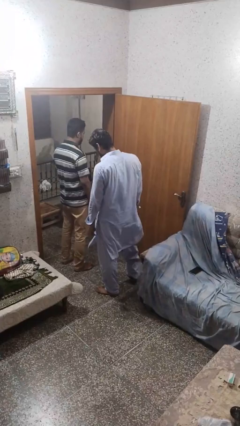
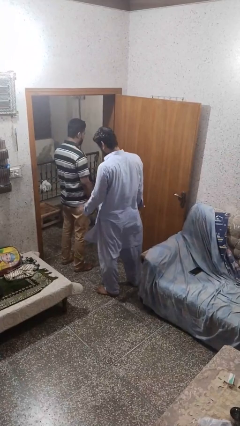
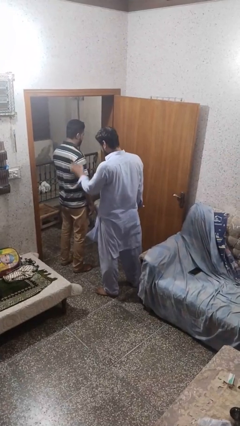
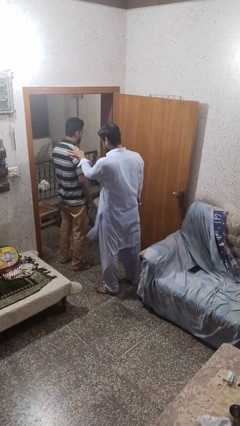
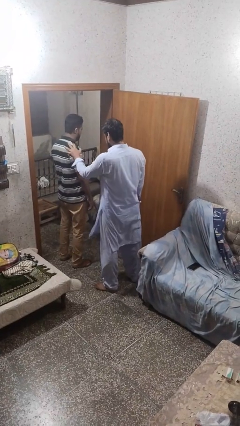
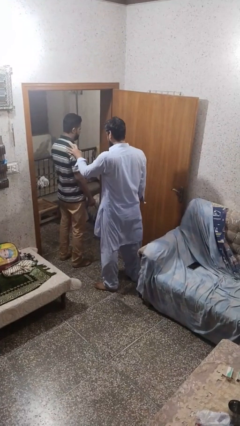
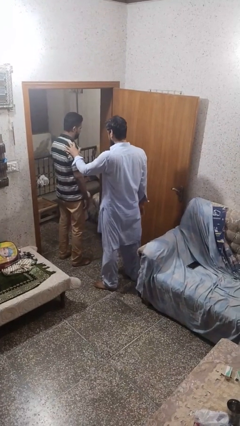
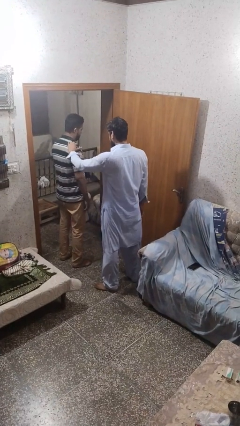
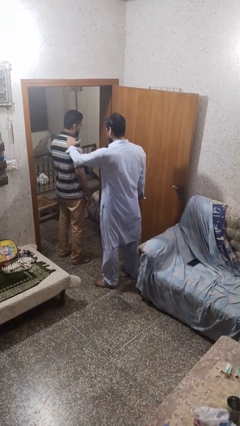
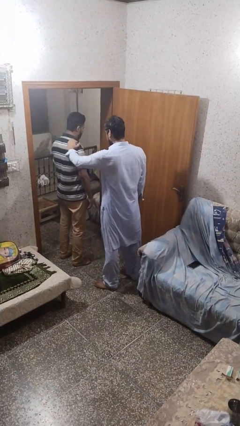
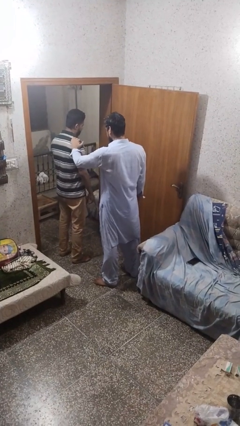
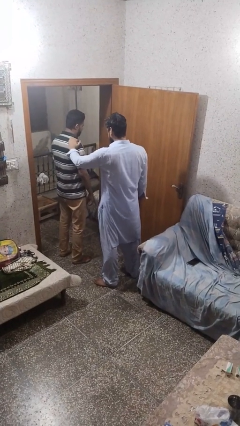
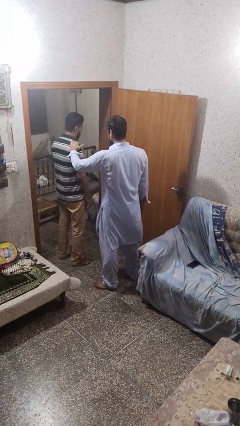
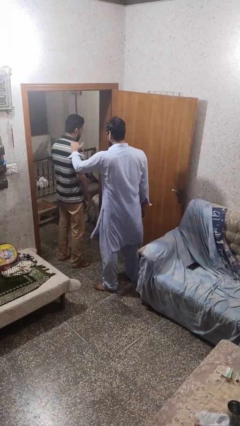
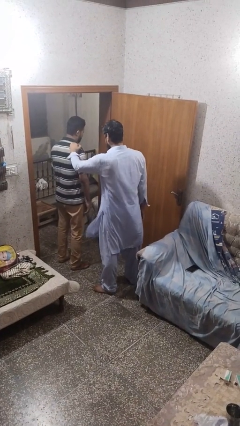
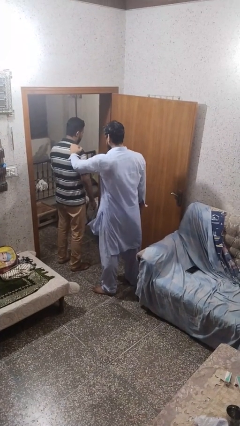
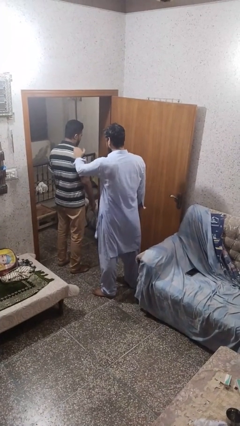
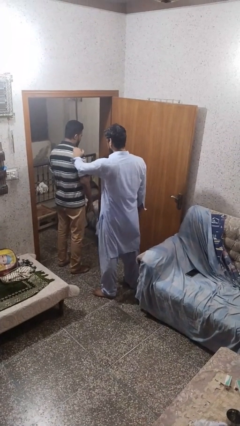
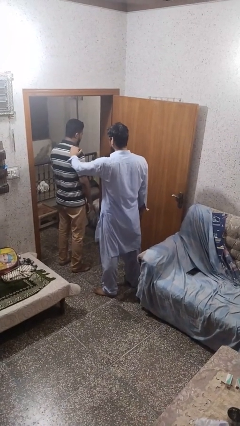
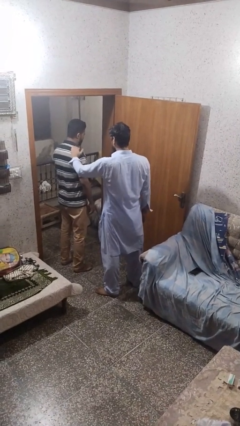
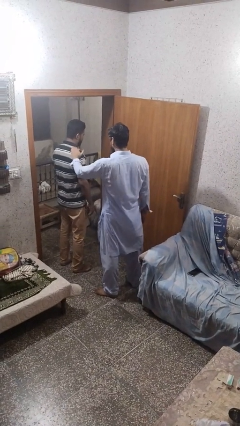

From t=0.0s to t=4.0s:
person grabs person by shoulder

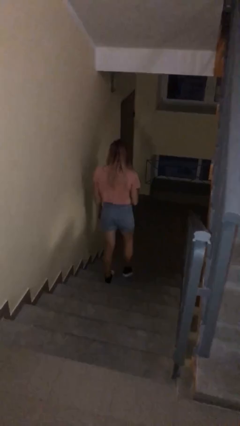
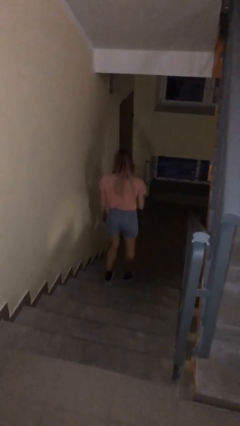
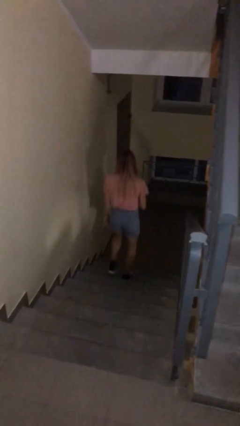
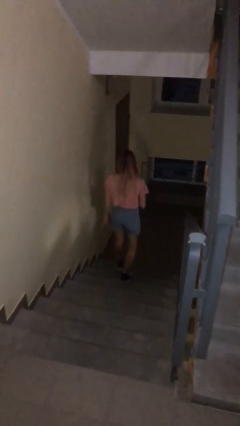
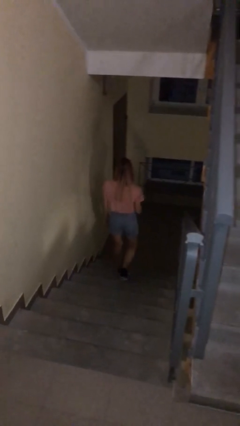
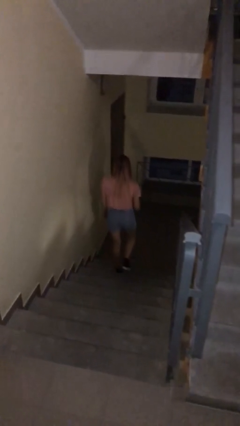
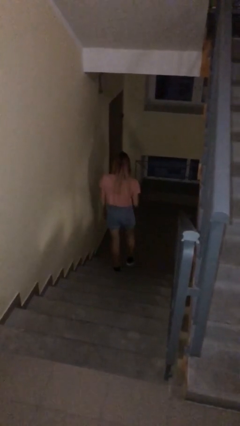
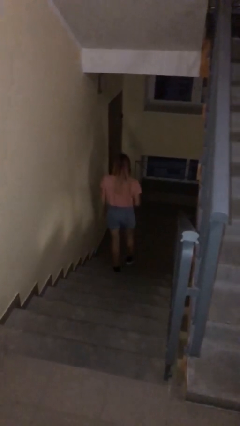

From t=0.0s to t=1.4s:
person climbs down stairs

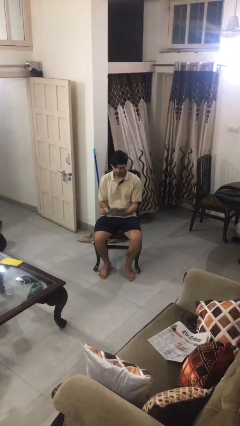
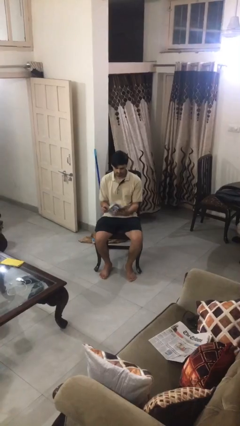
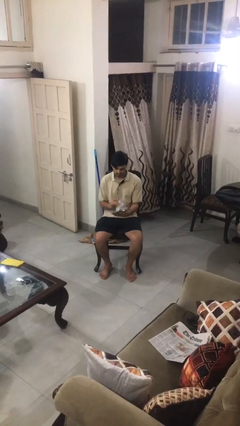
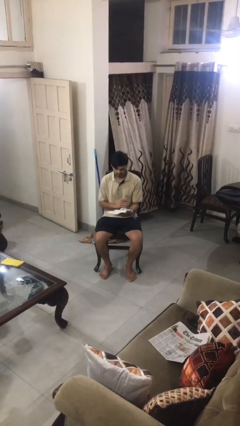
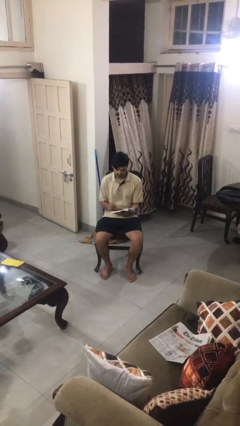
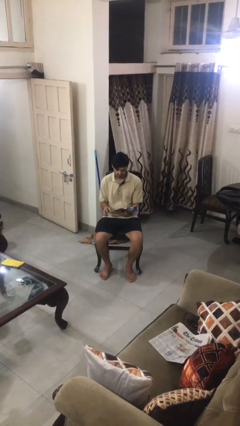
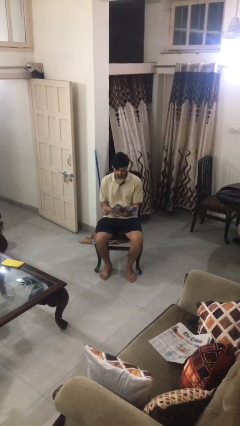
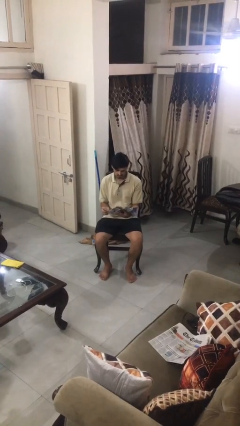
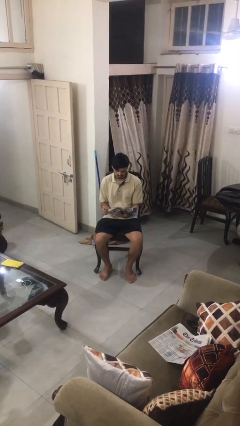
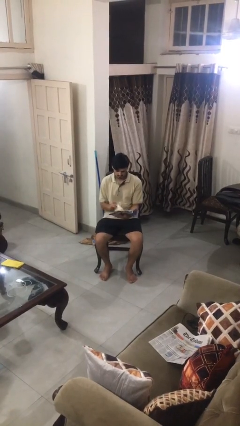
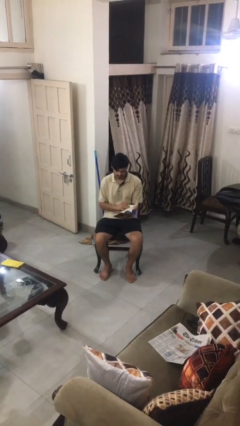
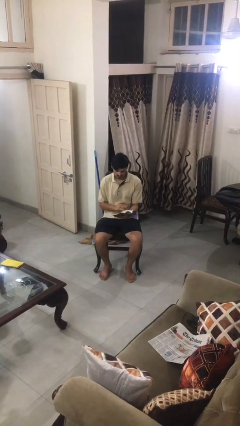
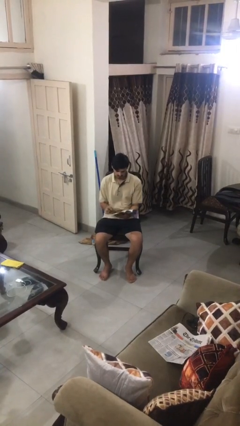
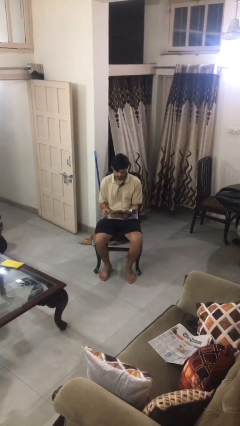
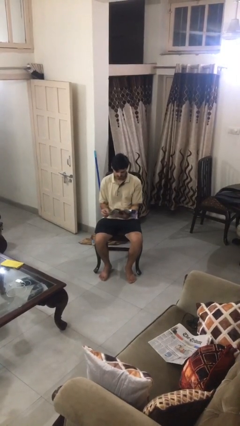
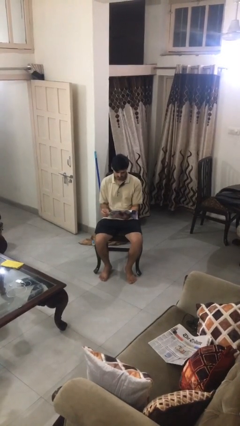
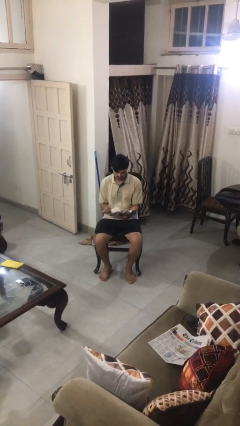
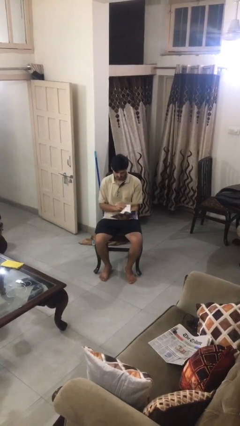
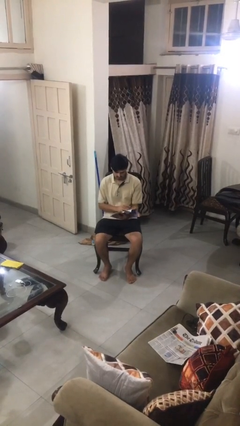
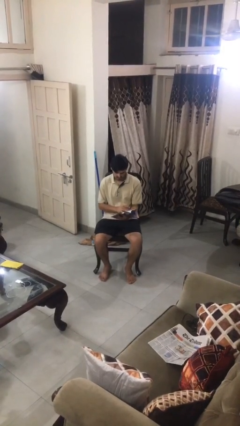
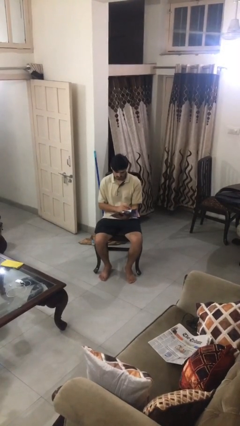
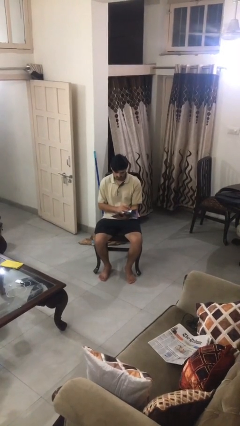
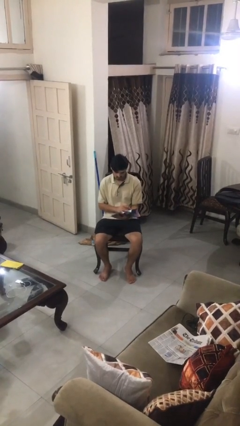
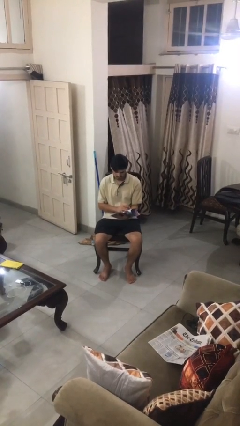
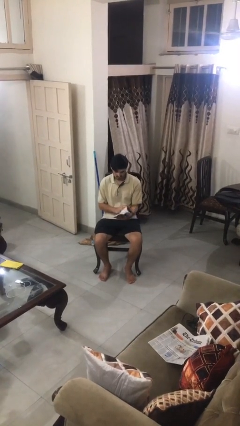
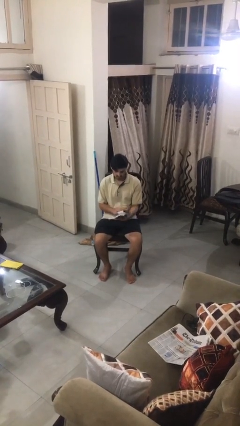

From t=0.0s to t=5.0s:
person reads magazine

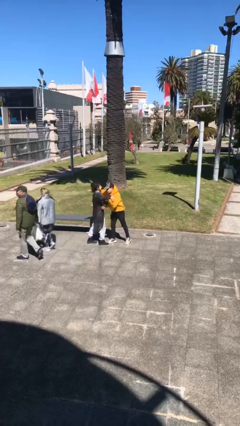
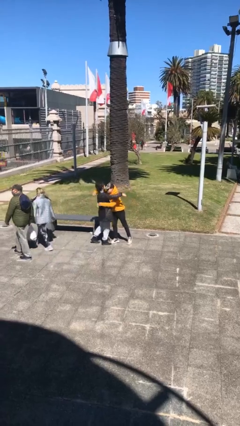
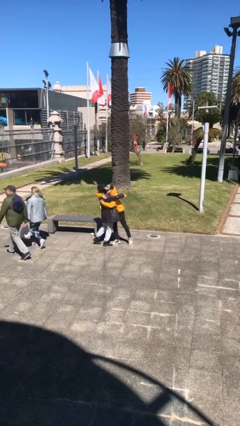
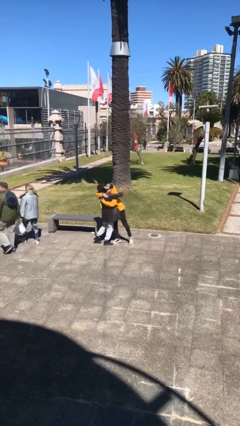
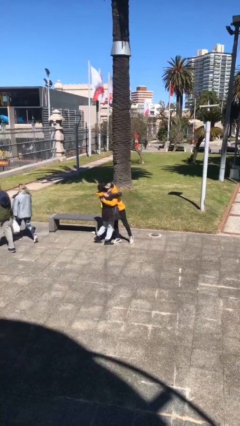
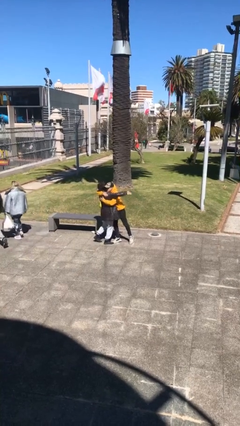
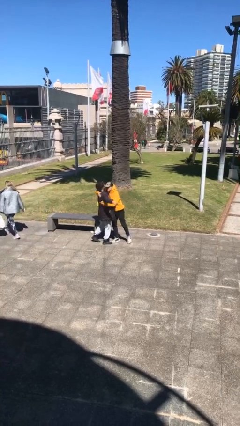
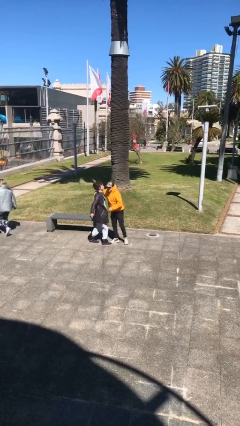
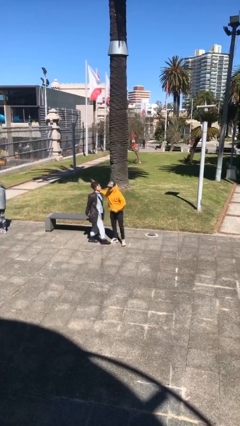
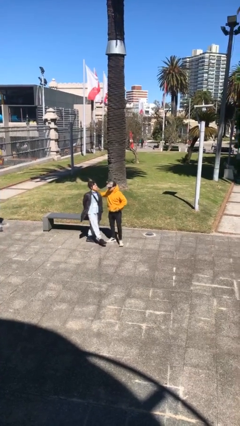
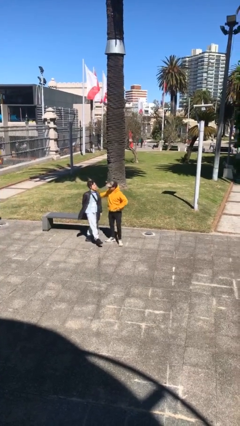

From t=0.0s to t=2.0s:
person embraces person

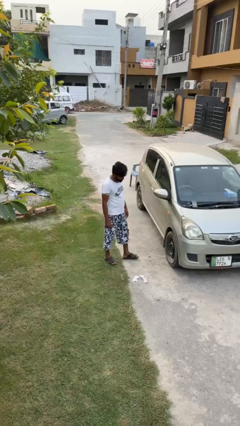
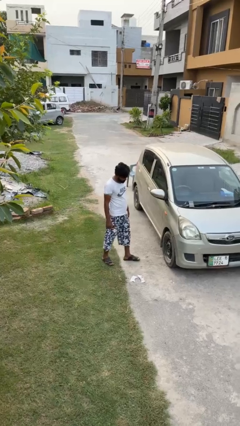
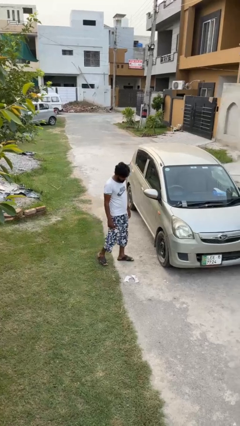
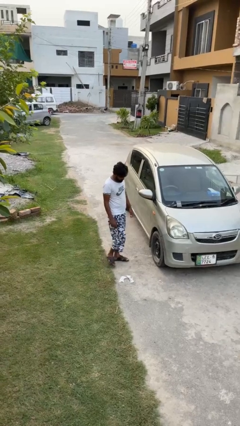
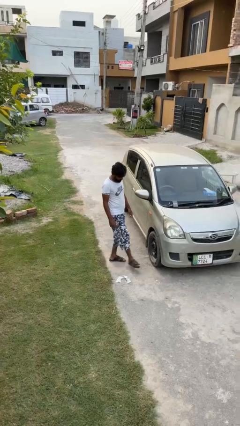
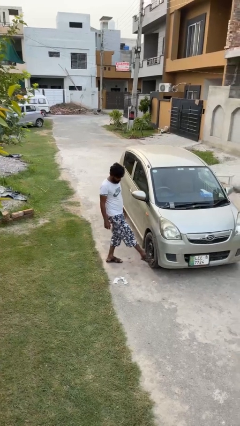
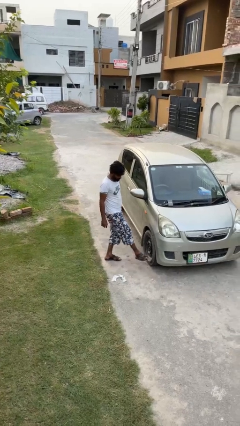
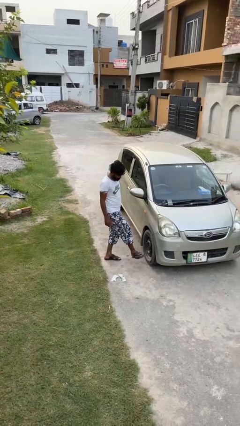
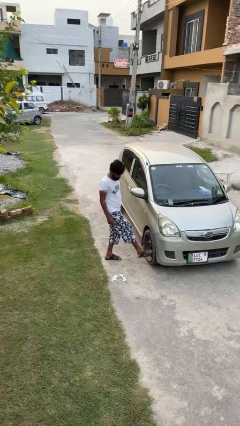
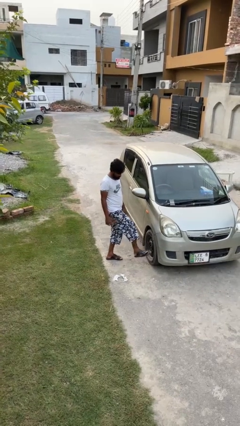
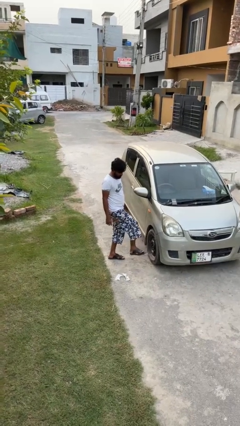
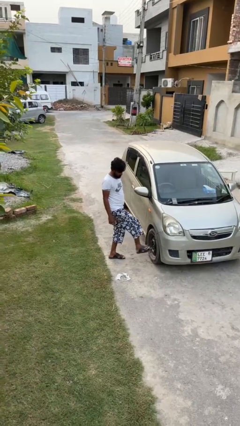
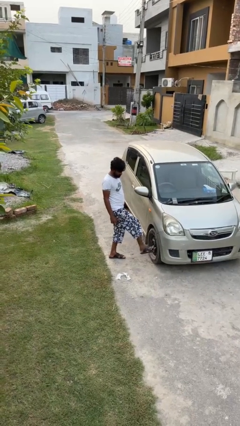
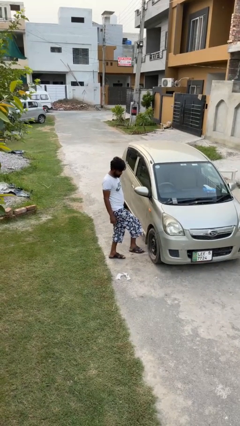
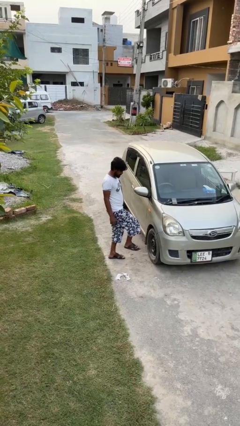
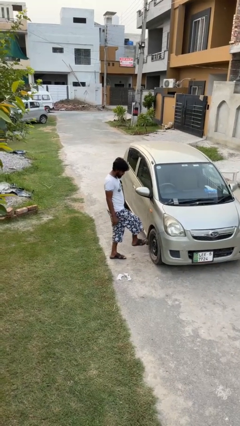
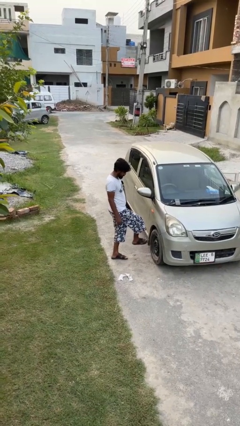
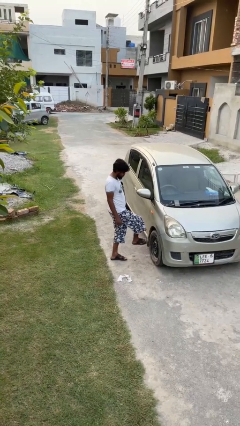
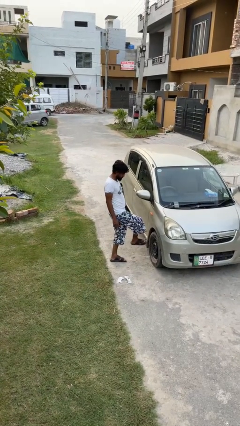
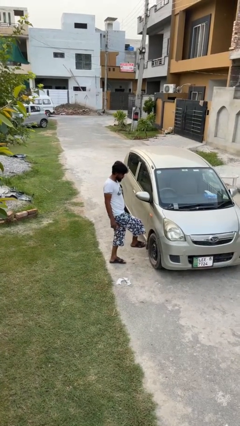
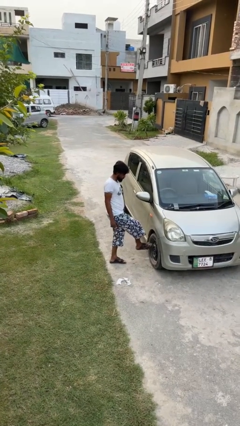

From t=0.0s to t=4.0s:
person kicks car tires

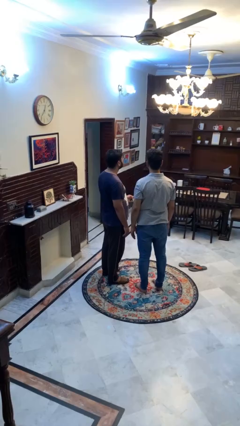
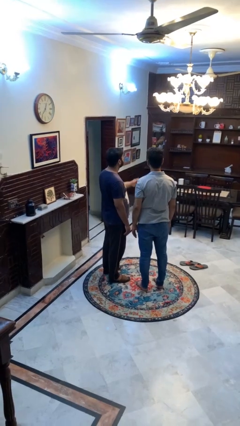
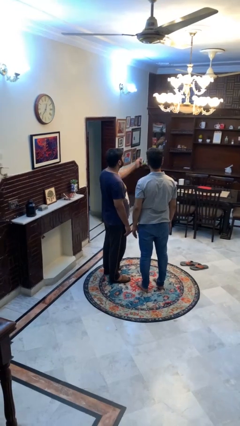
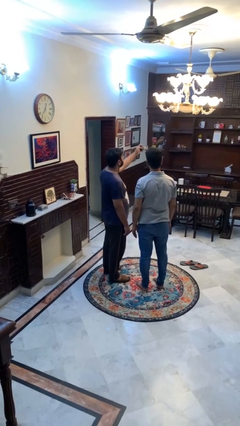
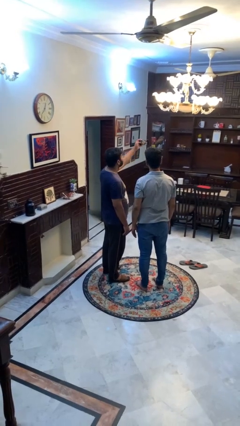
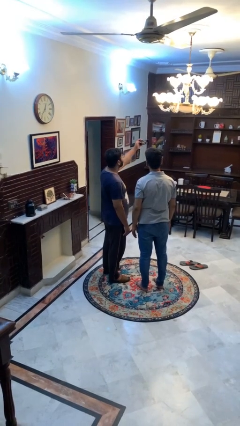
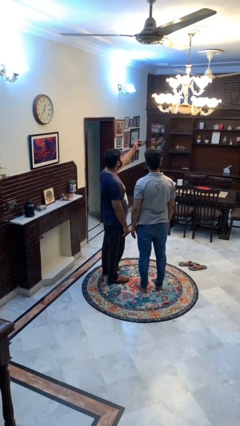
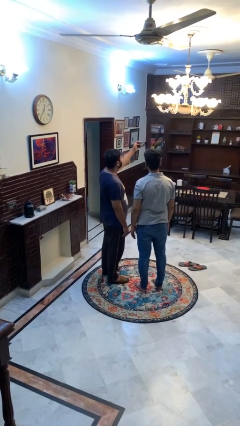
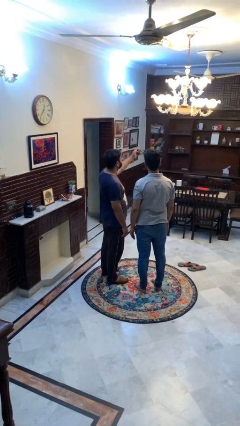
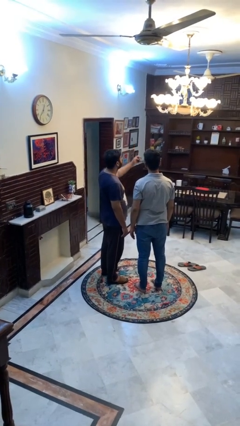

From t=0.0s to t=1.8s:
person takes selfie with person
